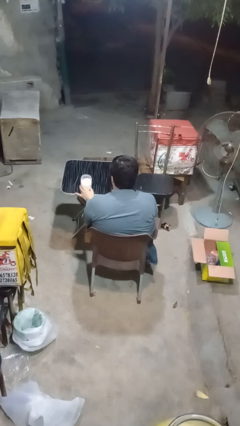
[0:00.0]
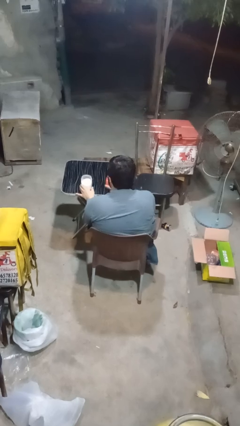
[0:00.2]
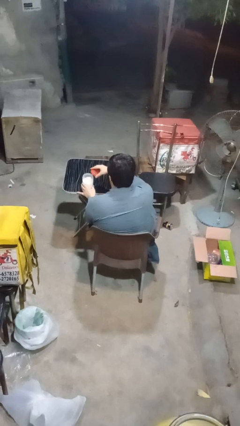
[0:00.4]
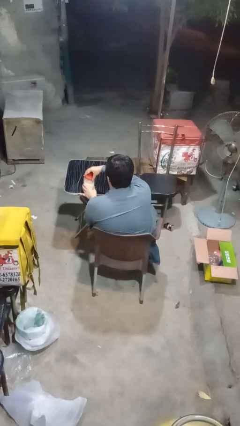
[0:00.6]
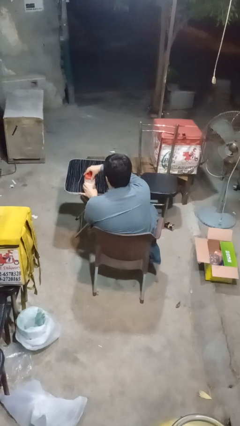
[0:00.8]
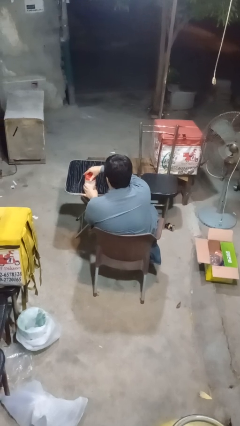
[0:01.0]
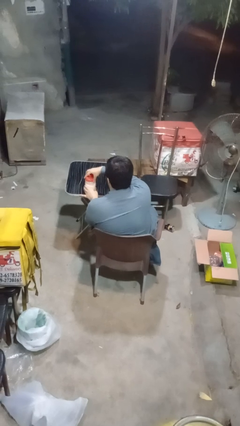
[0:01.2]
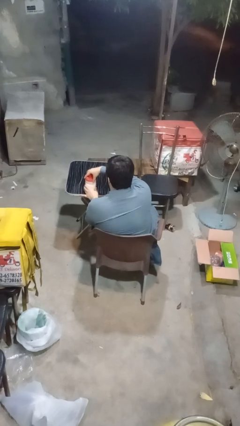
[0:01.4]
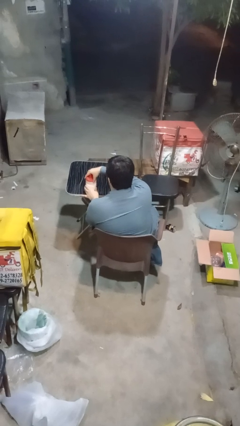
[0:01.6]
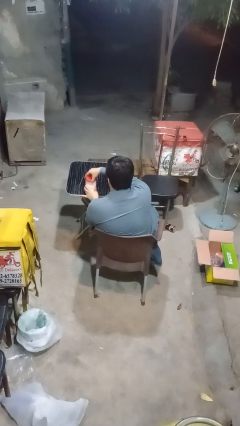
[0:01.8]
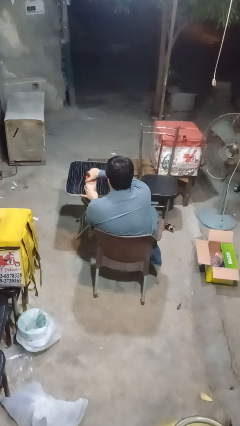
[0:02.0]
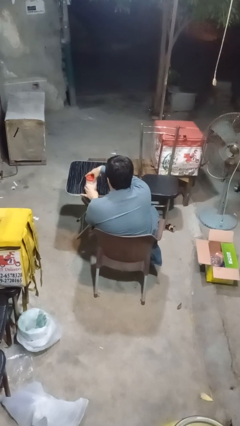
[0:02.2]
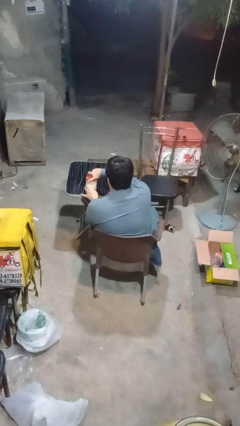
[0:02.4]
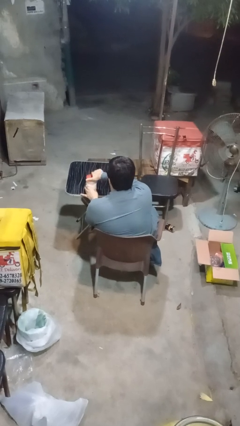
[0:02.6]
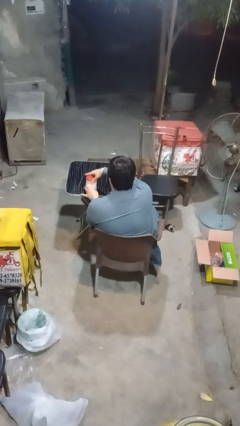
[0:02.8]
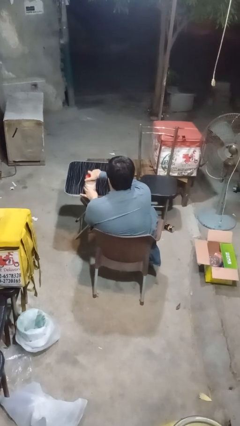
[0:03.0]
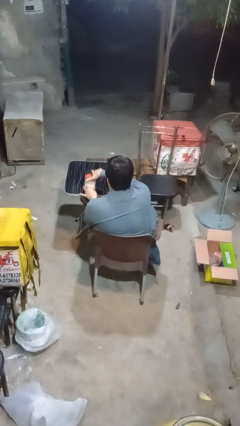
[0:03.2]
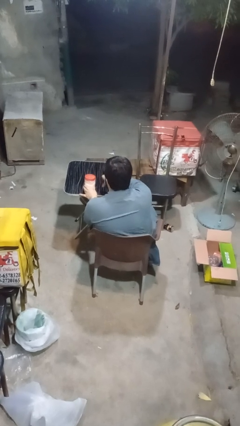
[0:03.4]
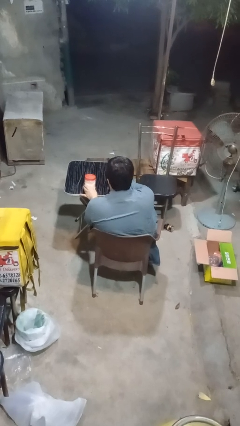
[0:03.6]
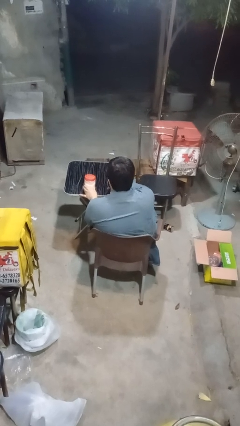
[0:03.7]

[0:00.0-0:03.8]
person closes jar

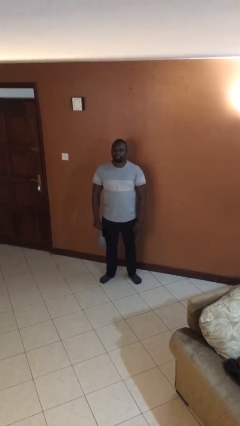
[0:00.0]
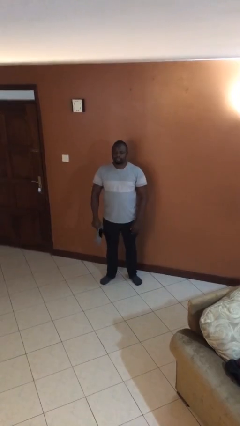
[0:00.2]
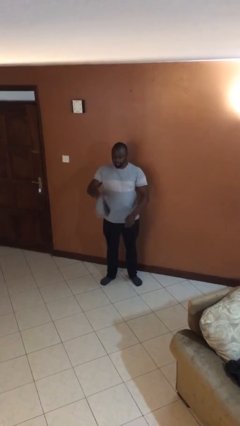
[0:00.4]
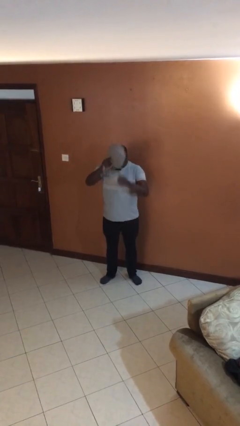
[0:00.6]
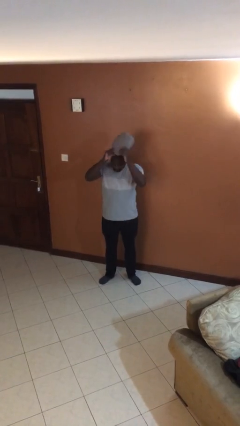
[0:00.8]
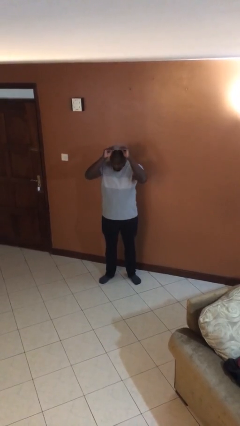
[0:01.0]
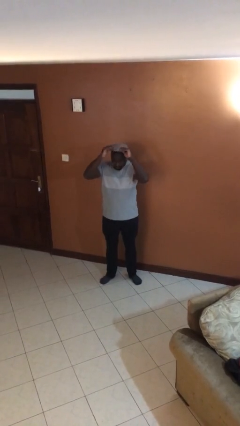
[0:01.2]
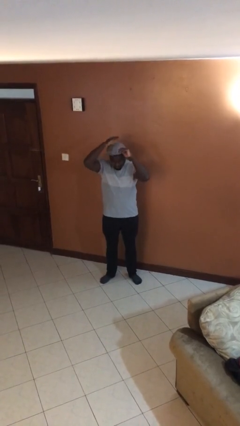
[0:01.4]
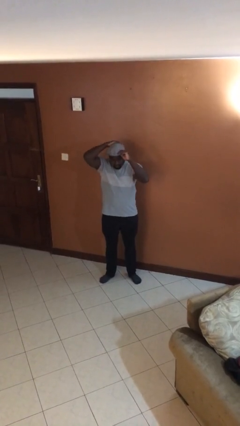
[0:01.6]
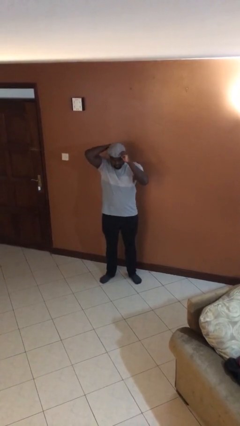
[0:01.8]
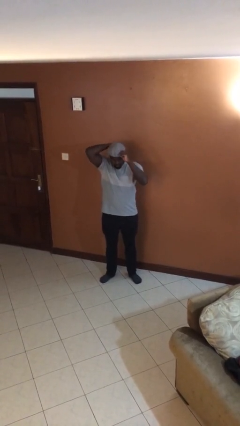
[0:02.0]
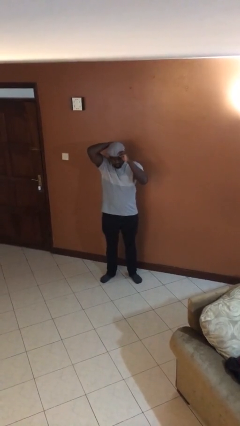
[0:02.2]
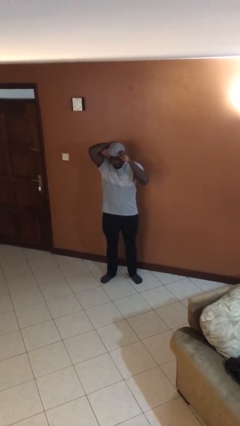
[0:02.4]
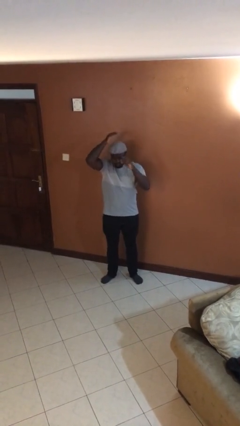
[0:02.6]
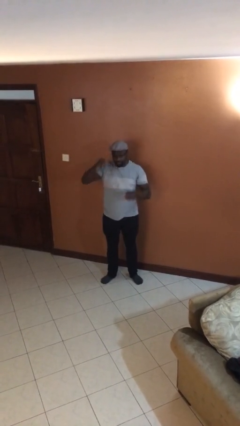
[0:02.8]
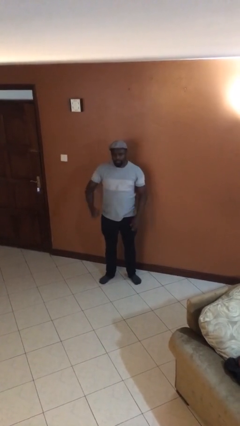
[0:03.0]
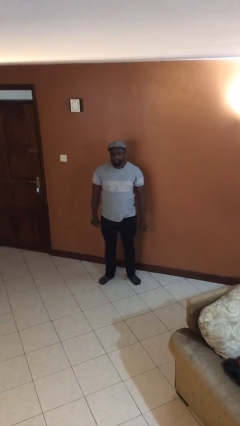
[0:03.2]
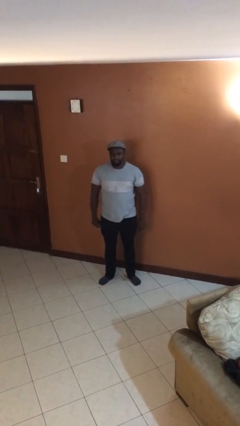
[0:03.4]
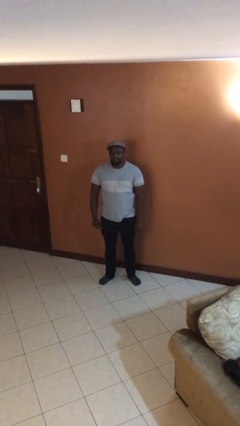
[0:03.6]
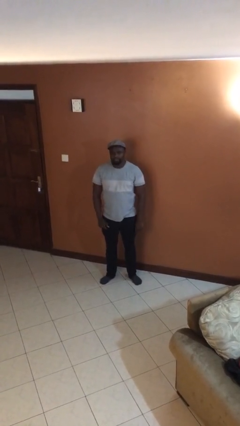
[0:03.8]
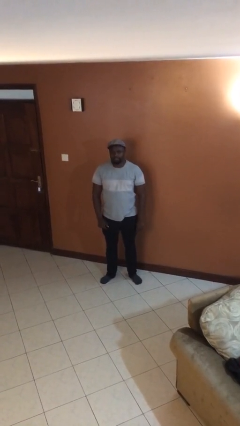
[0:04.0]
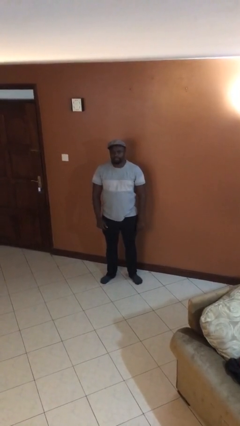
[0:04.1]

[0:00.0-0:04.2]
person puts on hat

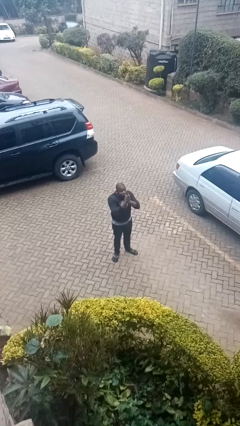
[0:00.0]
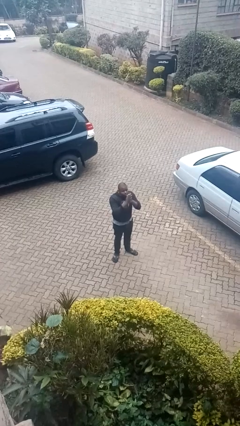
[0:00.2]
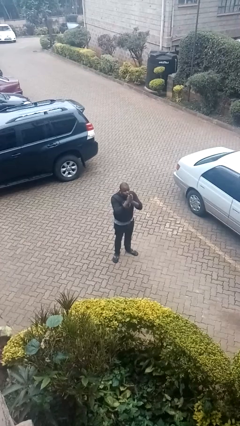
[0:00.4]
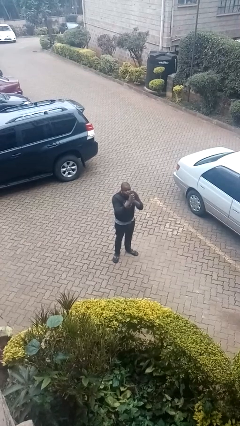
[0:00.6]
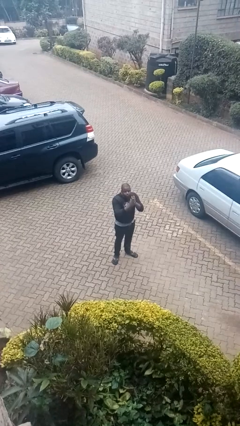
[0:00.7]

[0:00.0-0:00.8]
person blows into hands

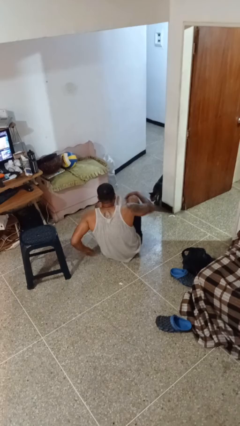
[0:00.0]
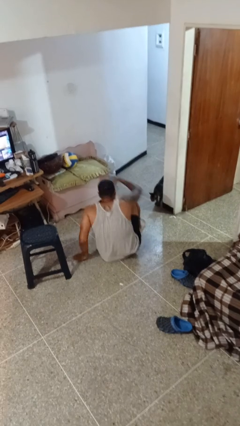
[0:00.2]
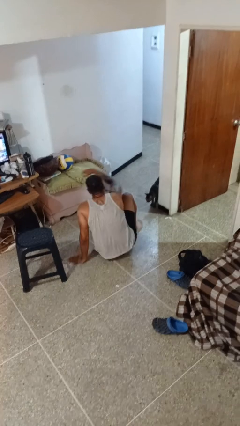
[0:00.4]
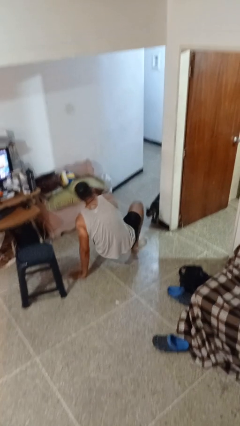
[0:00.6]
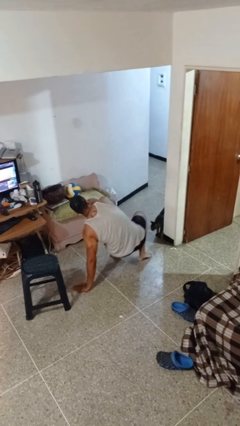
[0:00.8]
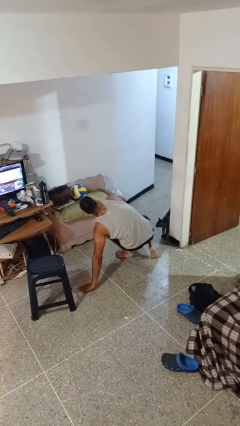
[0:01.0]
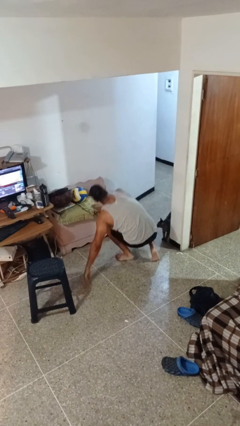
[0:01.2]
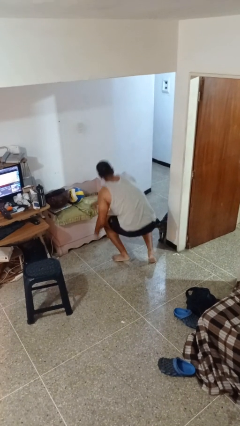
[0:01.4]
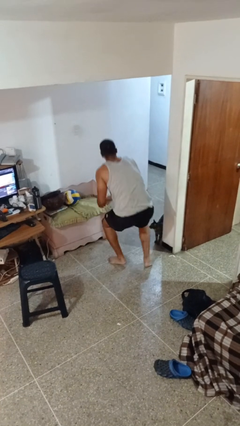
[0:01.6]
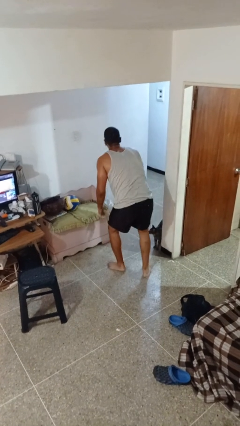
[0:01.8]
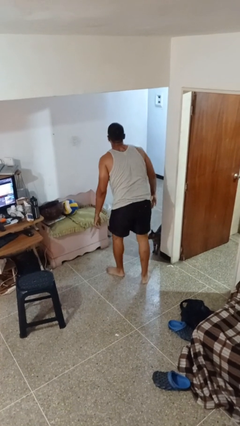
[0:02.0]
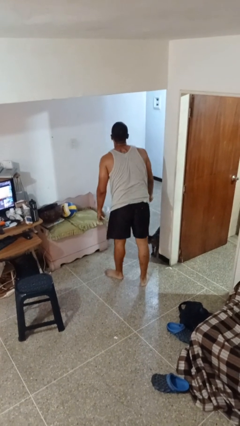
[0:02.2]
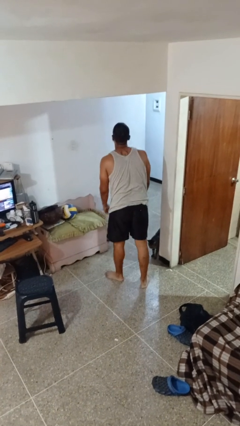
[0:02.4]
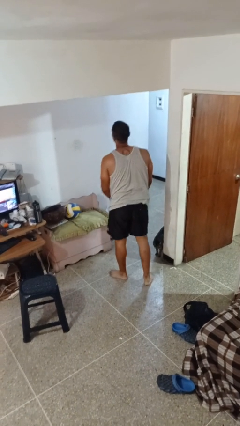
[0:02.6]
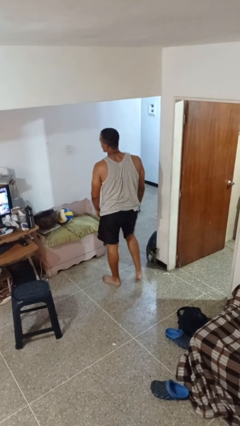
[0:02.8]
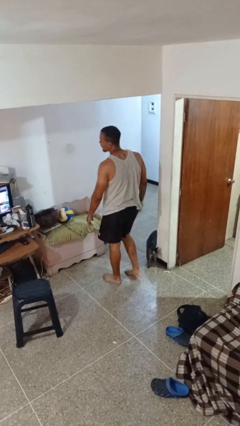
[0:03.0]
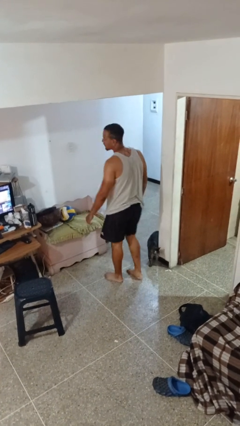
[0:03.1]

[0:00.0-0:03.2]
person stands up from floor

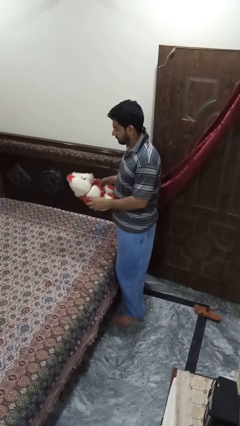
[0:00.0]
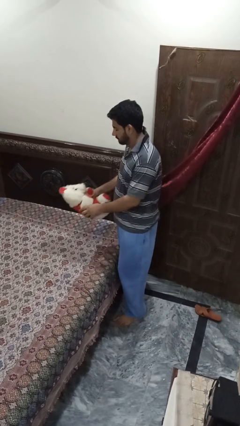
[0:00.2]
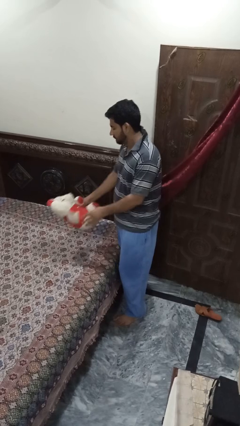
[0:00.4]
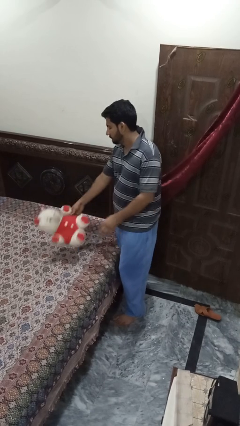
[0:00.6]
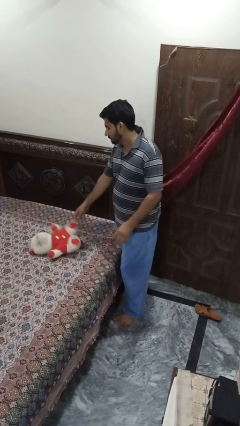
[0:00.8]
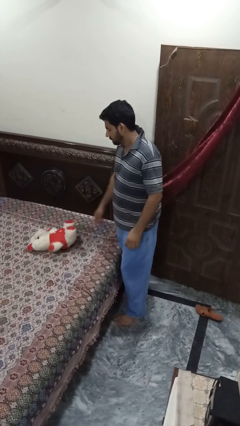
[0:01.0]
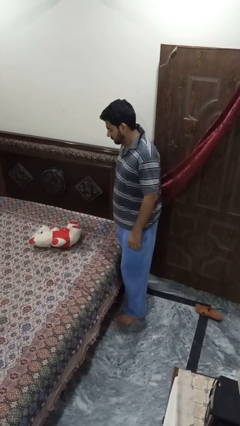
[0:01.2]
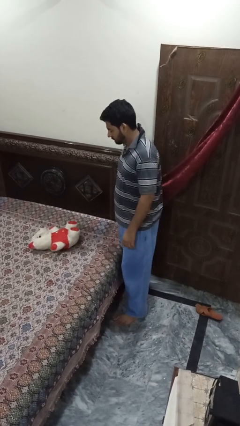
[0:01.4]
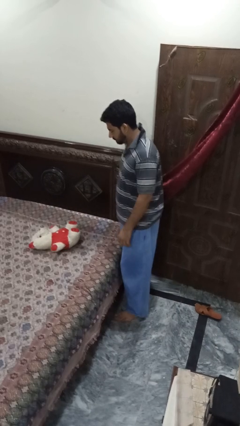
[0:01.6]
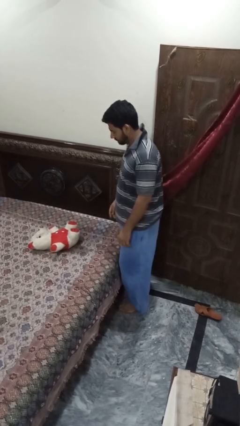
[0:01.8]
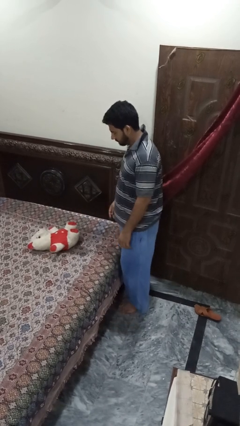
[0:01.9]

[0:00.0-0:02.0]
person puts down object on bed

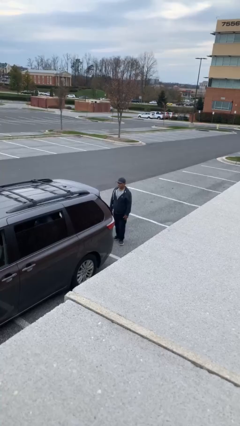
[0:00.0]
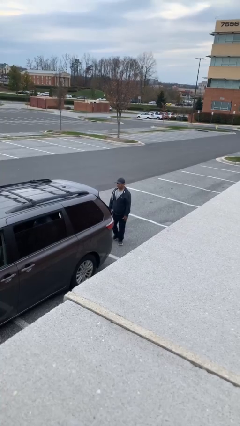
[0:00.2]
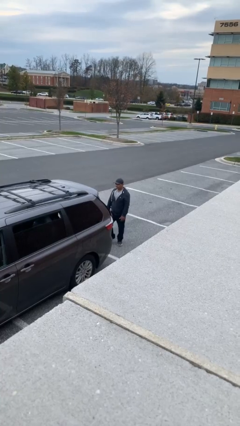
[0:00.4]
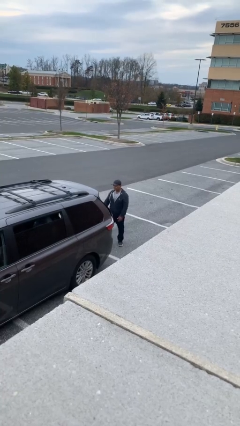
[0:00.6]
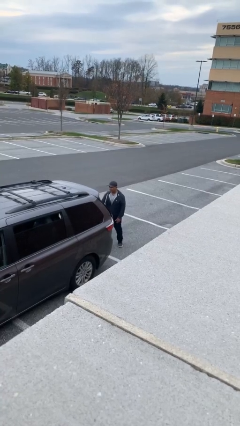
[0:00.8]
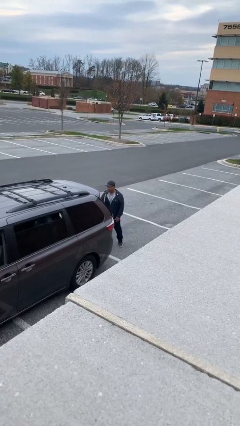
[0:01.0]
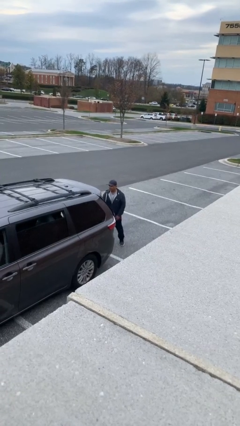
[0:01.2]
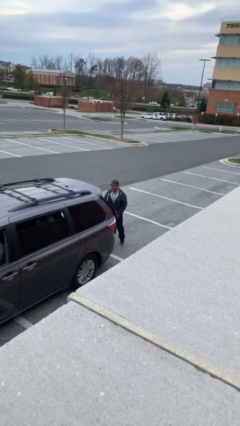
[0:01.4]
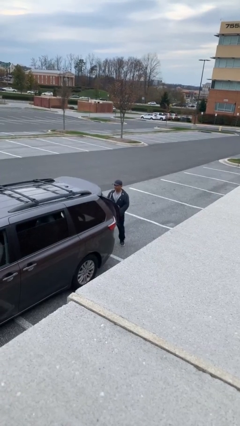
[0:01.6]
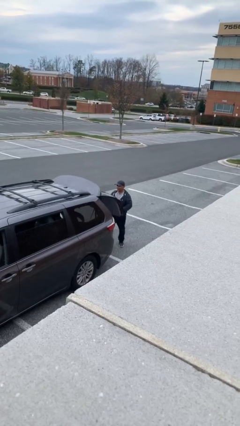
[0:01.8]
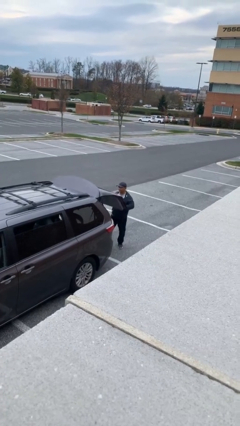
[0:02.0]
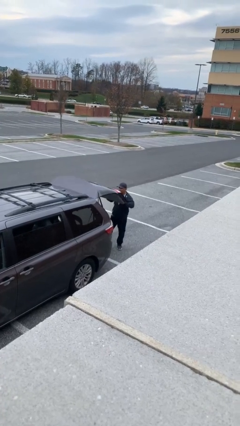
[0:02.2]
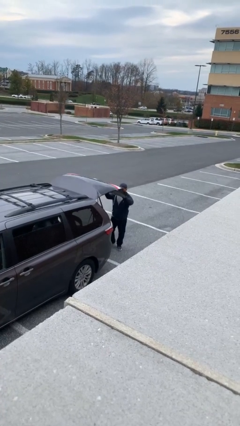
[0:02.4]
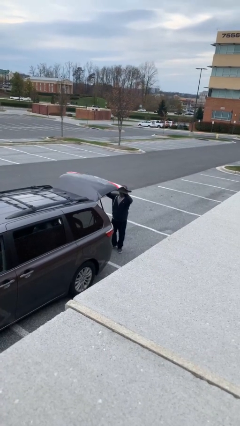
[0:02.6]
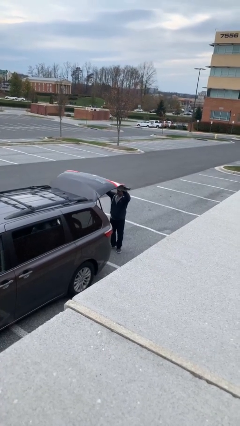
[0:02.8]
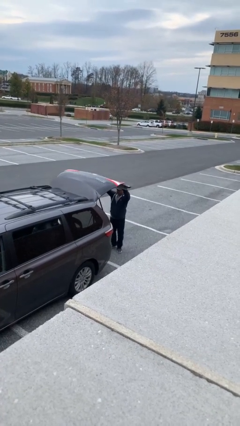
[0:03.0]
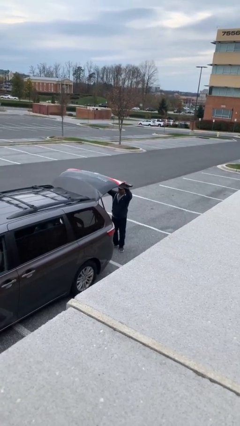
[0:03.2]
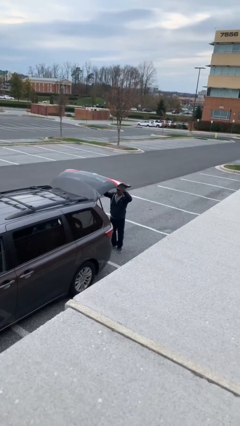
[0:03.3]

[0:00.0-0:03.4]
person opens car trunk

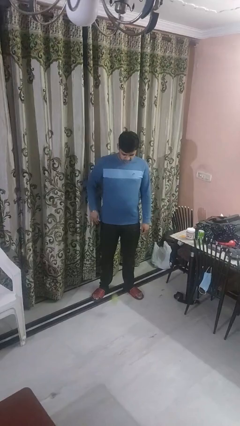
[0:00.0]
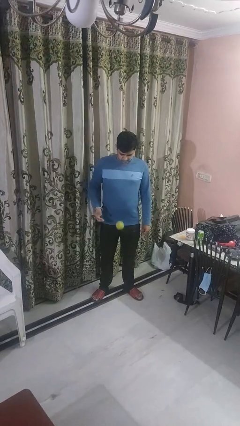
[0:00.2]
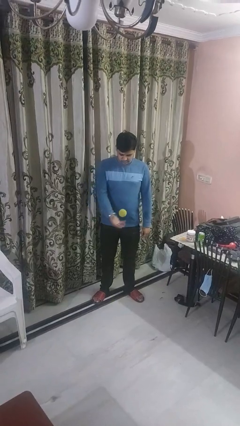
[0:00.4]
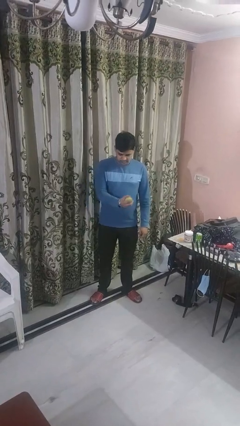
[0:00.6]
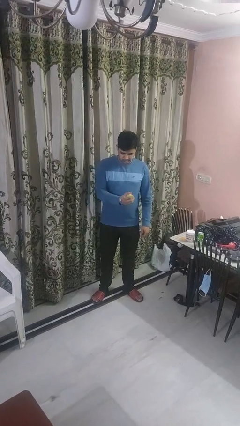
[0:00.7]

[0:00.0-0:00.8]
person bounces ball on floor
